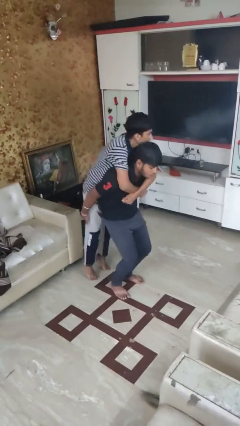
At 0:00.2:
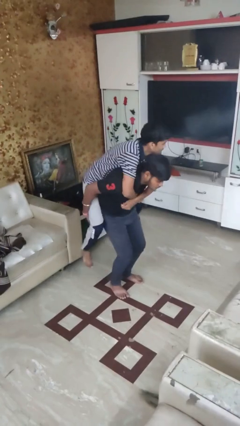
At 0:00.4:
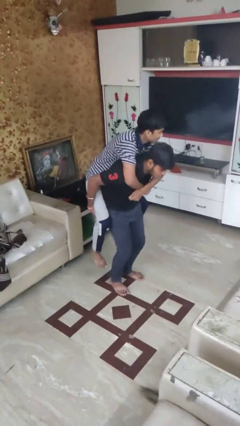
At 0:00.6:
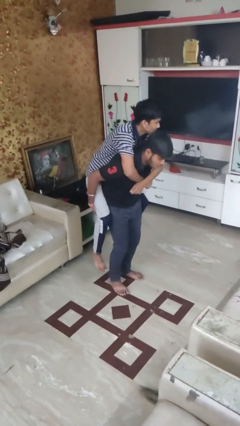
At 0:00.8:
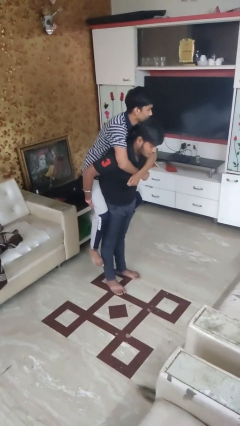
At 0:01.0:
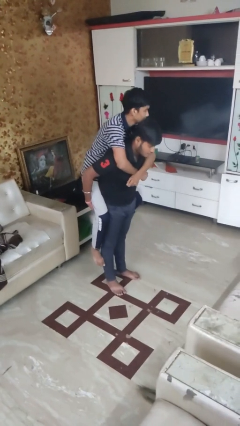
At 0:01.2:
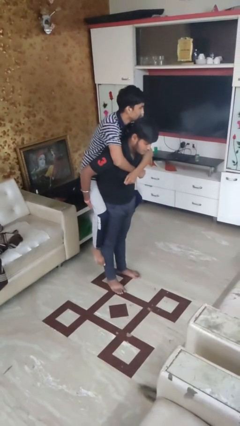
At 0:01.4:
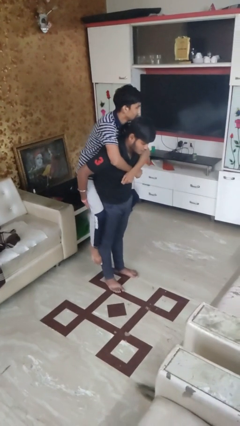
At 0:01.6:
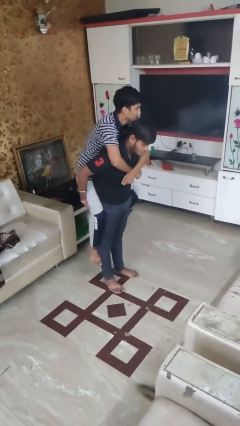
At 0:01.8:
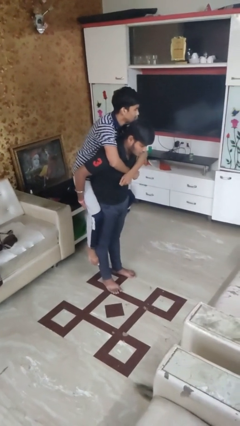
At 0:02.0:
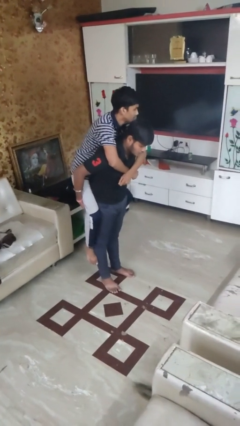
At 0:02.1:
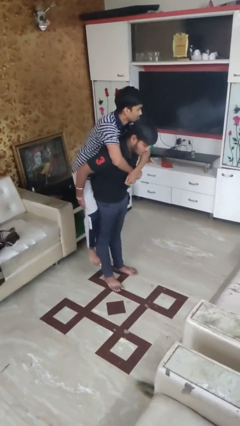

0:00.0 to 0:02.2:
person carries person over shoulder

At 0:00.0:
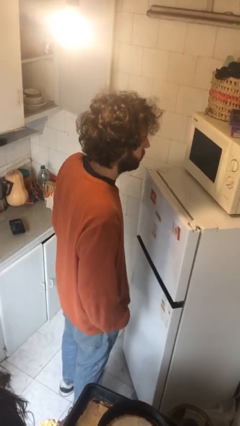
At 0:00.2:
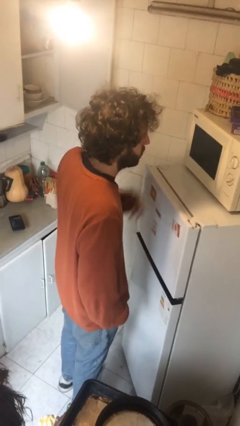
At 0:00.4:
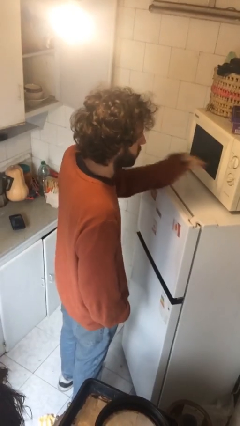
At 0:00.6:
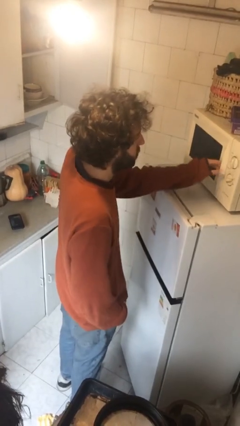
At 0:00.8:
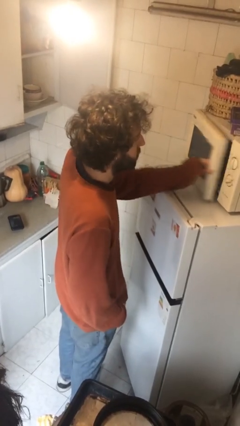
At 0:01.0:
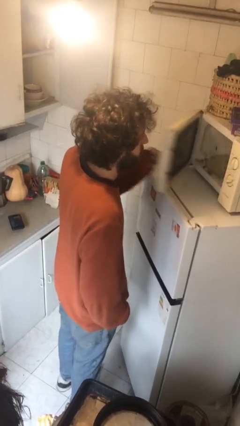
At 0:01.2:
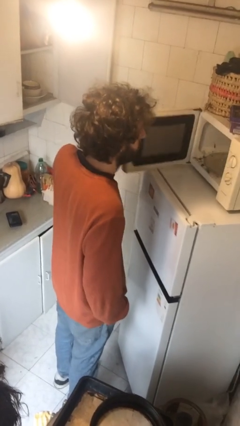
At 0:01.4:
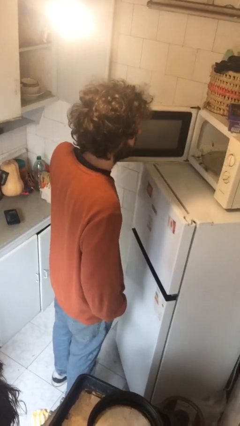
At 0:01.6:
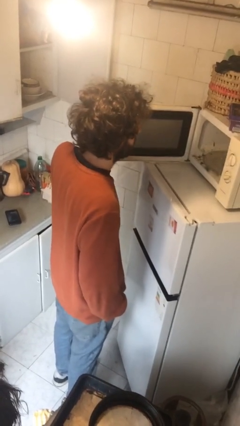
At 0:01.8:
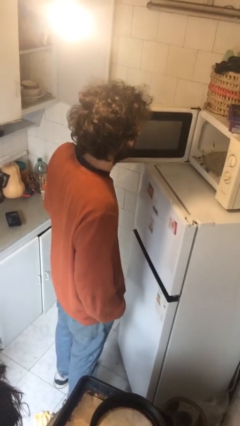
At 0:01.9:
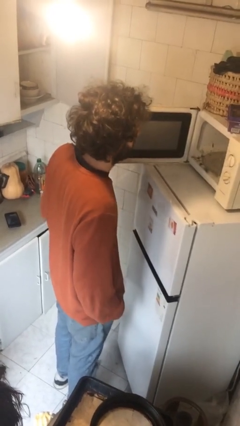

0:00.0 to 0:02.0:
person opens microwave

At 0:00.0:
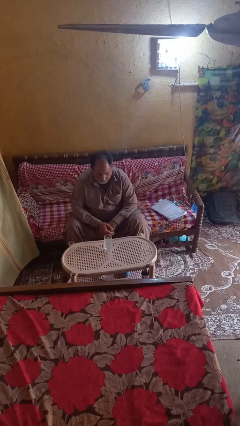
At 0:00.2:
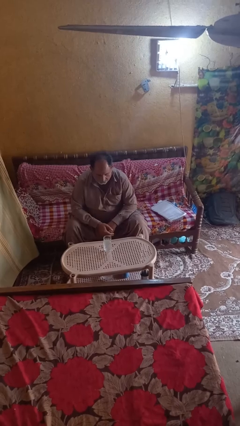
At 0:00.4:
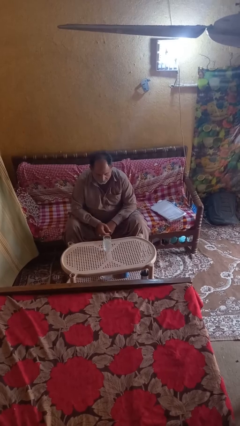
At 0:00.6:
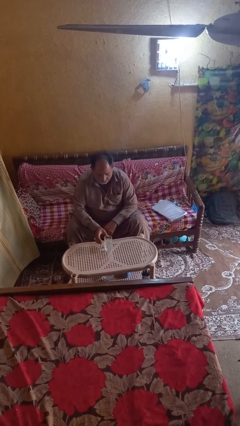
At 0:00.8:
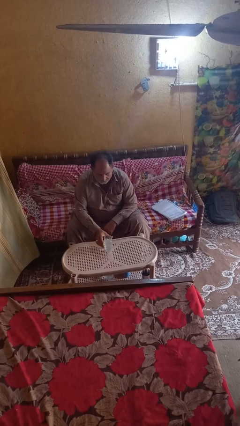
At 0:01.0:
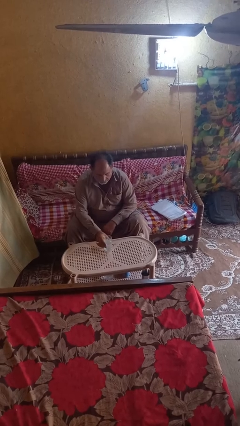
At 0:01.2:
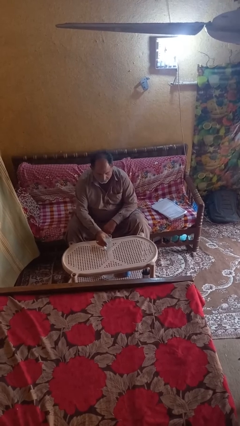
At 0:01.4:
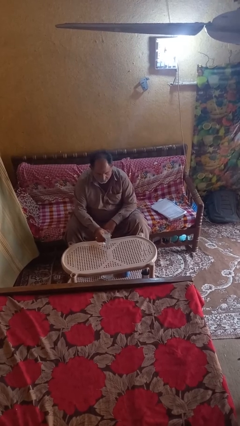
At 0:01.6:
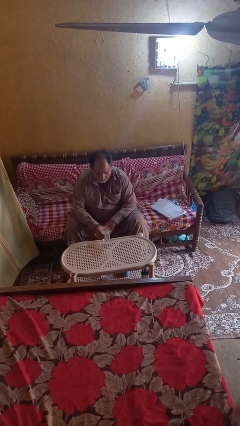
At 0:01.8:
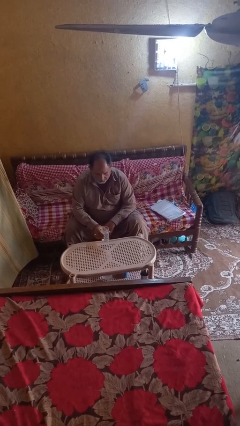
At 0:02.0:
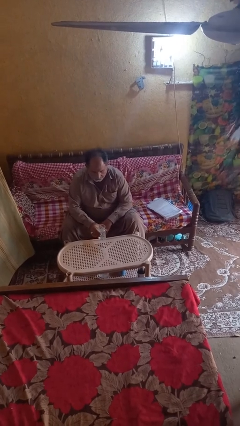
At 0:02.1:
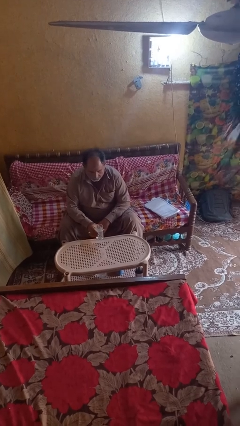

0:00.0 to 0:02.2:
person picks up object from table

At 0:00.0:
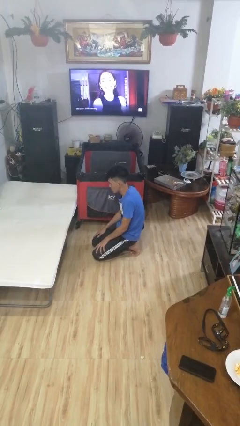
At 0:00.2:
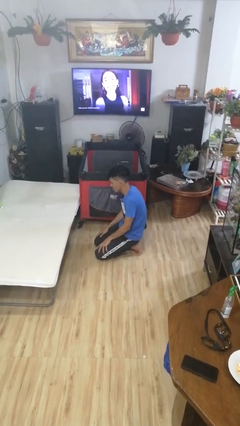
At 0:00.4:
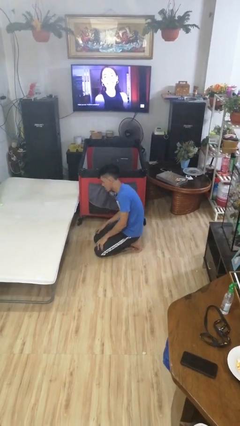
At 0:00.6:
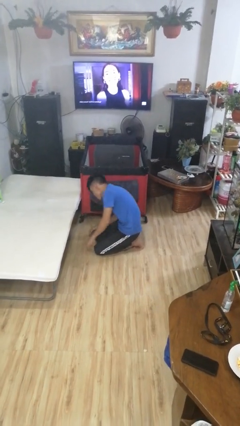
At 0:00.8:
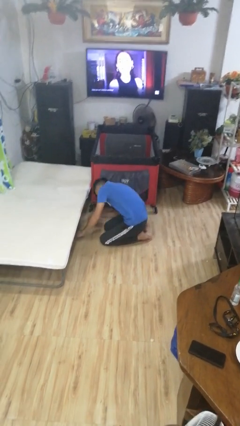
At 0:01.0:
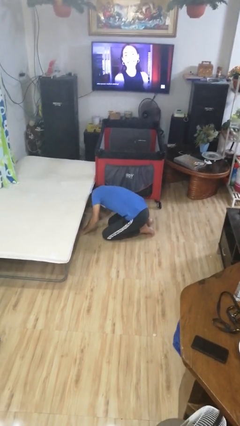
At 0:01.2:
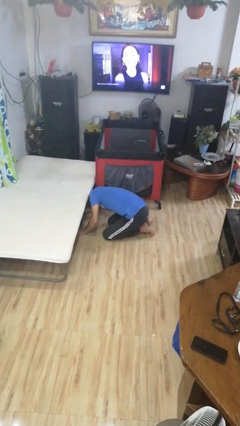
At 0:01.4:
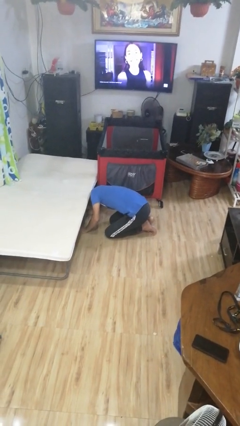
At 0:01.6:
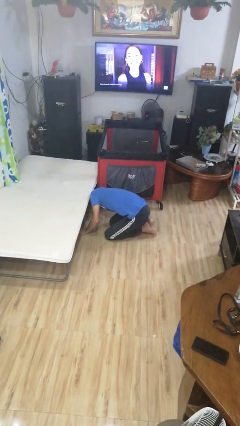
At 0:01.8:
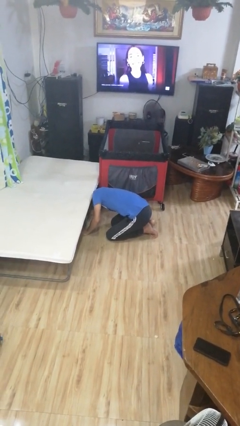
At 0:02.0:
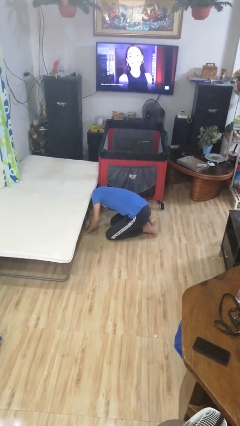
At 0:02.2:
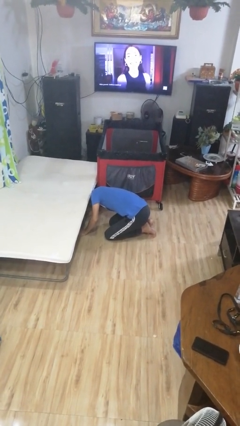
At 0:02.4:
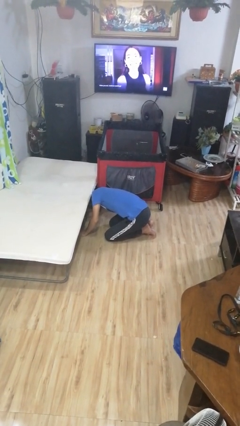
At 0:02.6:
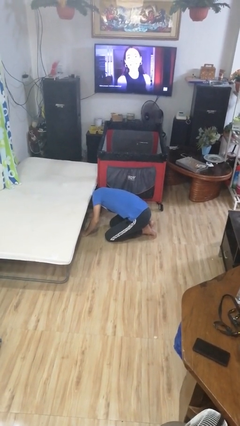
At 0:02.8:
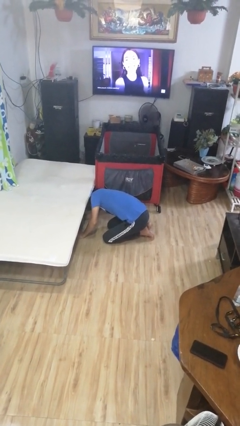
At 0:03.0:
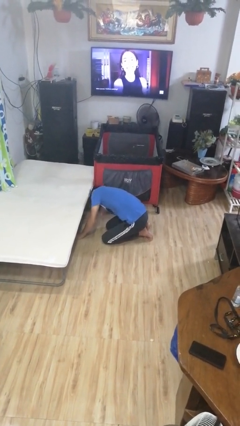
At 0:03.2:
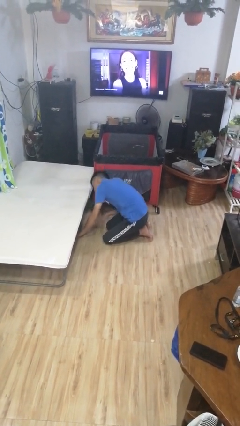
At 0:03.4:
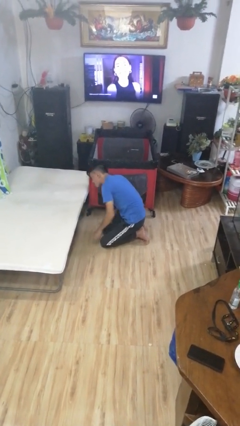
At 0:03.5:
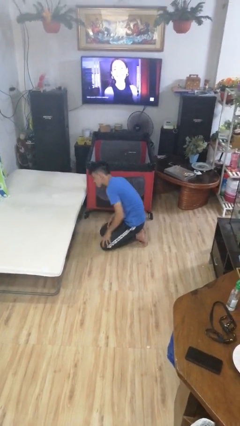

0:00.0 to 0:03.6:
person searches under bed

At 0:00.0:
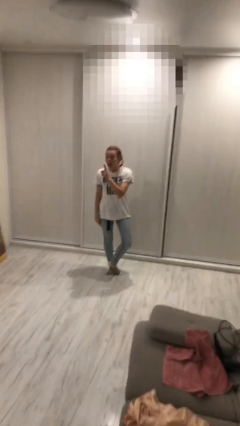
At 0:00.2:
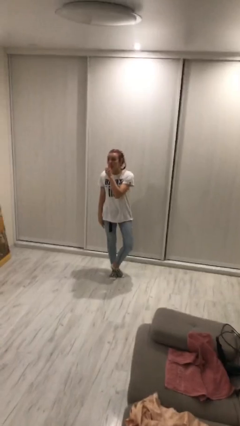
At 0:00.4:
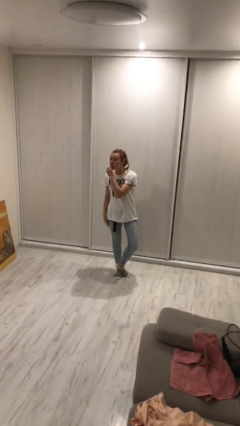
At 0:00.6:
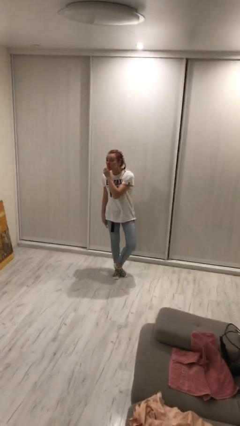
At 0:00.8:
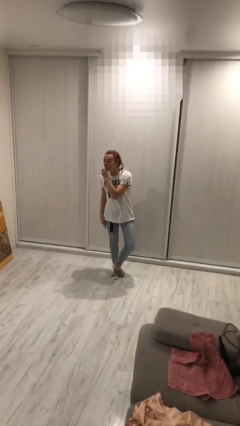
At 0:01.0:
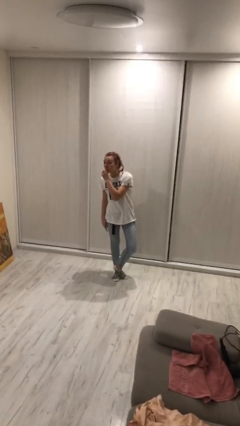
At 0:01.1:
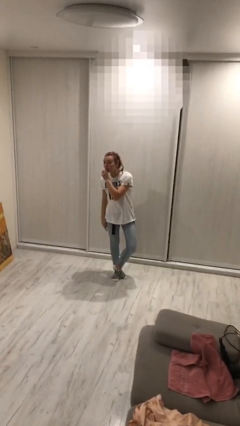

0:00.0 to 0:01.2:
person gestures be quiet

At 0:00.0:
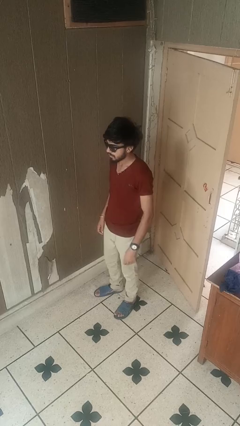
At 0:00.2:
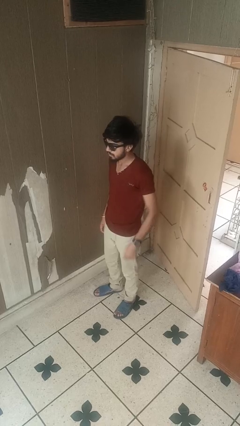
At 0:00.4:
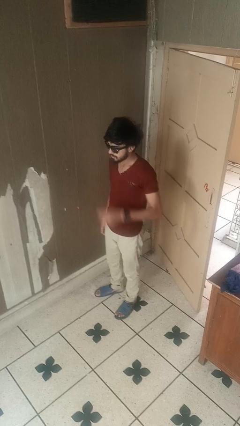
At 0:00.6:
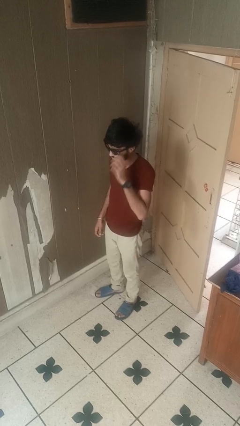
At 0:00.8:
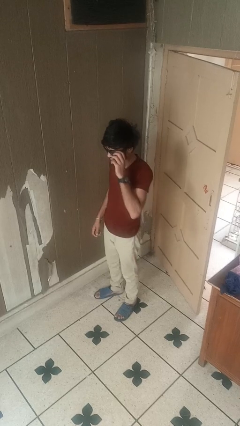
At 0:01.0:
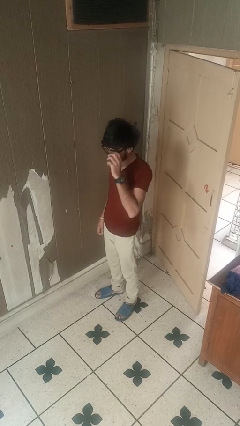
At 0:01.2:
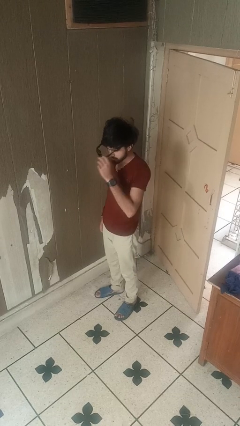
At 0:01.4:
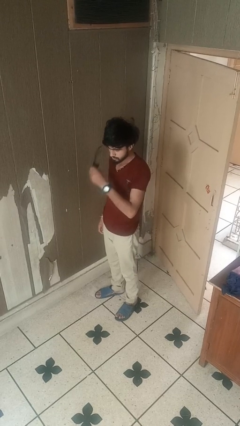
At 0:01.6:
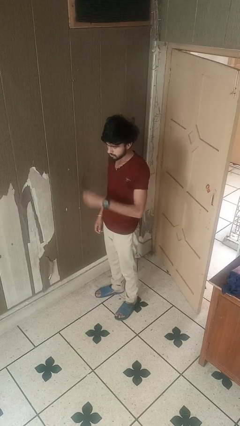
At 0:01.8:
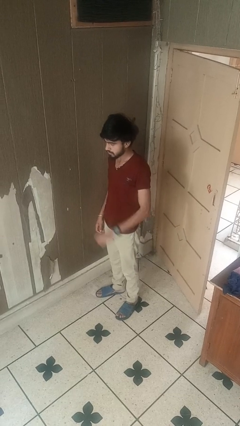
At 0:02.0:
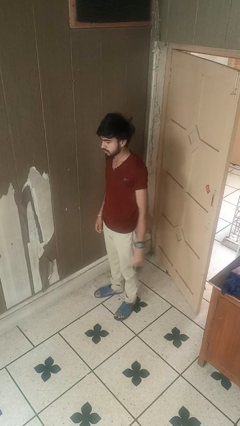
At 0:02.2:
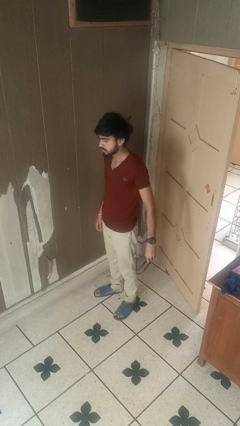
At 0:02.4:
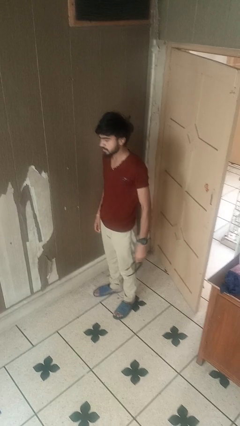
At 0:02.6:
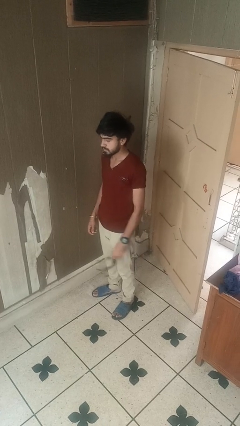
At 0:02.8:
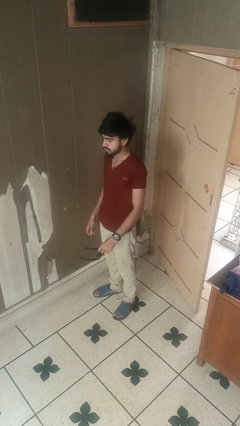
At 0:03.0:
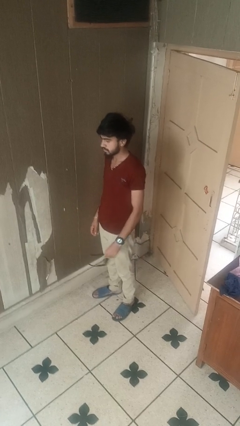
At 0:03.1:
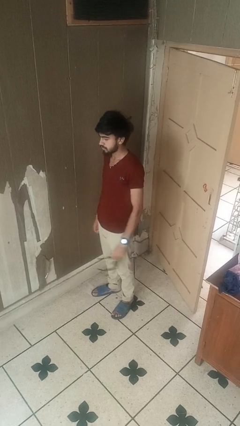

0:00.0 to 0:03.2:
person takes off sunglasses

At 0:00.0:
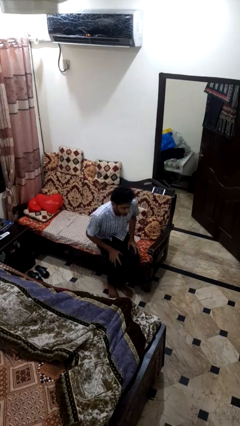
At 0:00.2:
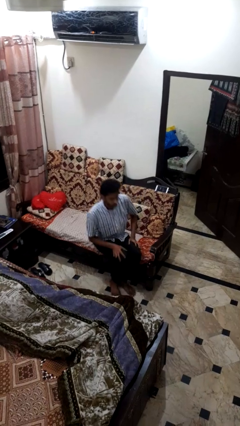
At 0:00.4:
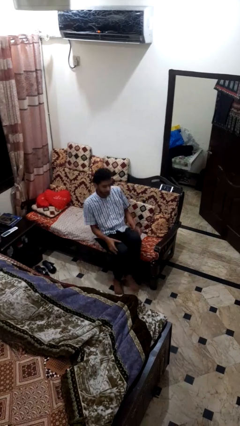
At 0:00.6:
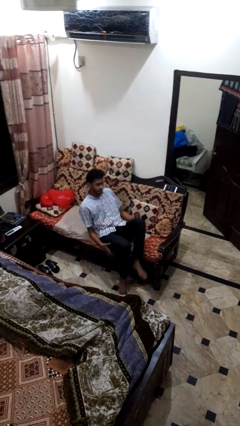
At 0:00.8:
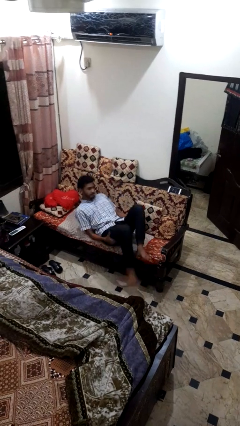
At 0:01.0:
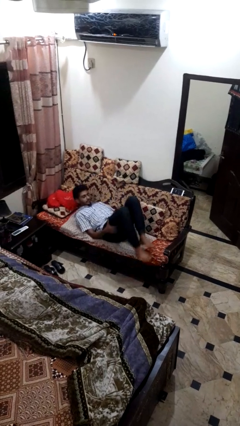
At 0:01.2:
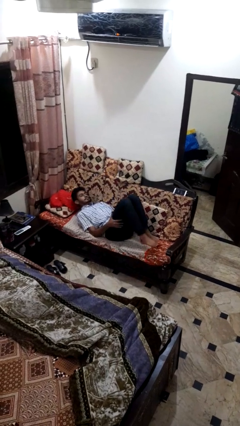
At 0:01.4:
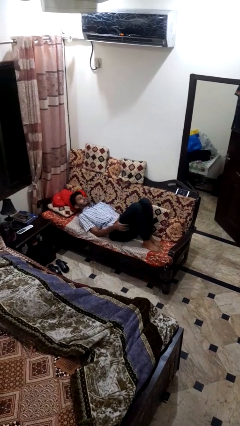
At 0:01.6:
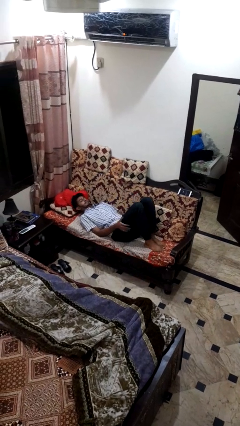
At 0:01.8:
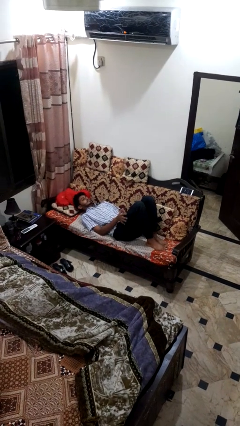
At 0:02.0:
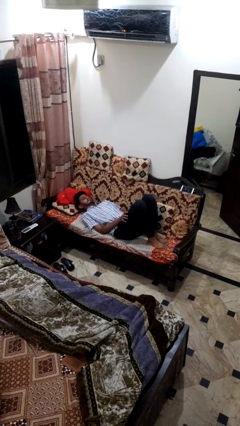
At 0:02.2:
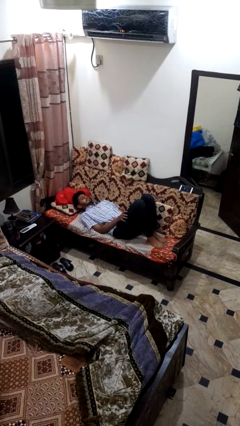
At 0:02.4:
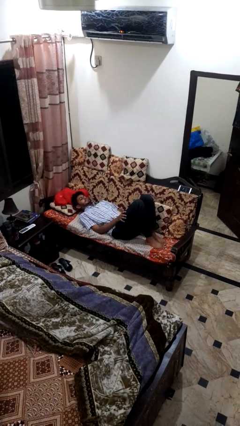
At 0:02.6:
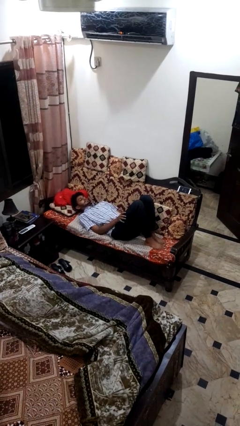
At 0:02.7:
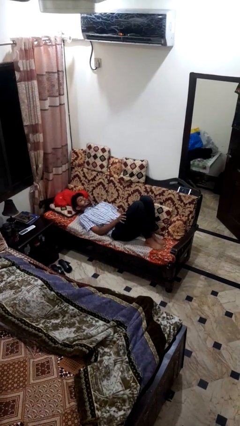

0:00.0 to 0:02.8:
person lies down on couch
